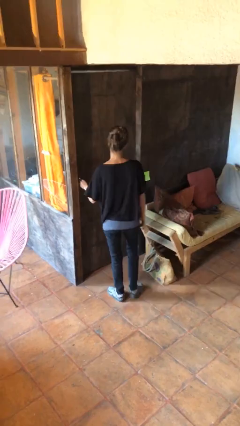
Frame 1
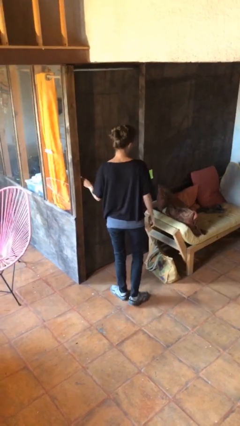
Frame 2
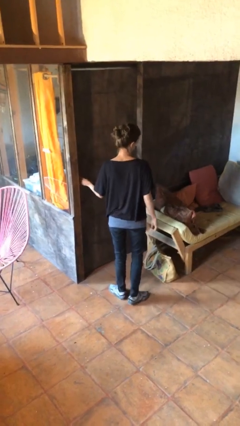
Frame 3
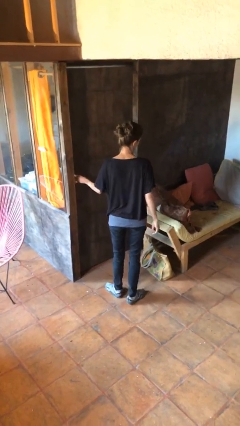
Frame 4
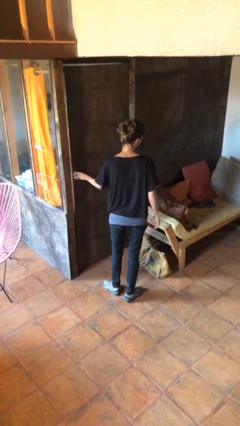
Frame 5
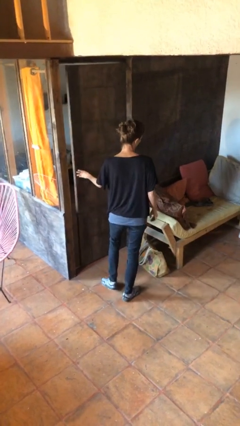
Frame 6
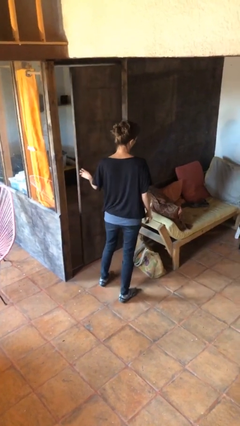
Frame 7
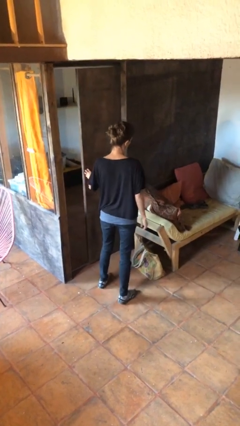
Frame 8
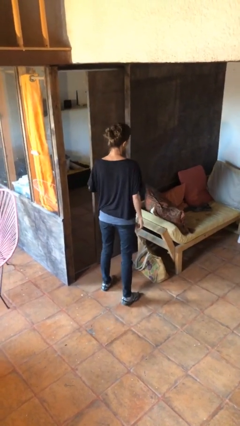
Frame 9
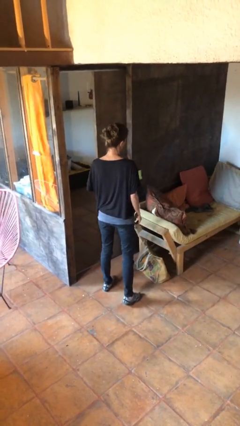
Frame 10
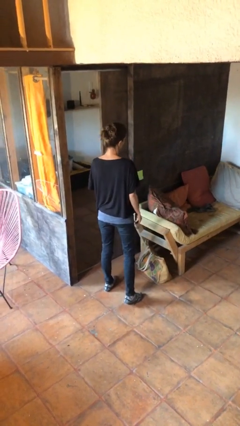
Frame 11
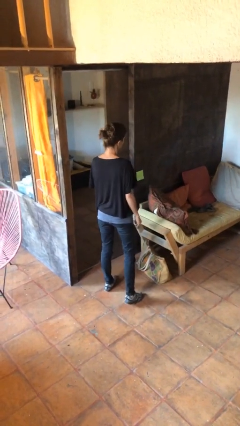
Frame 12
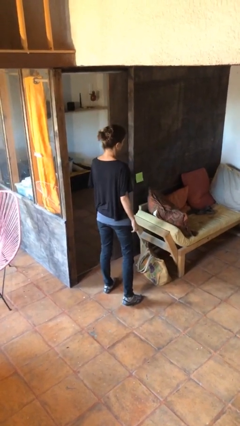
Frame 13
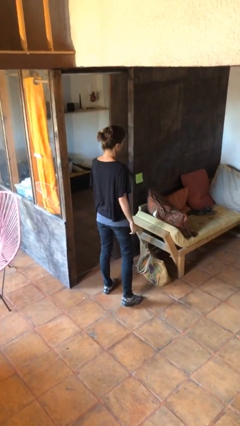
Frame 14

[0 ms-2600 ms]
person opens sliding door

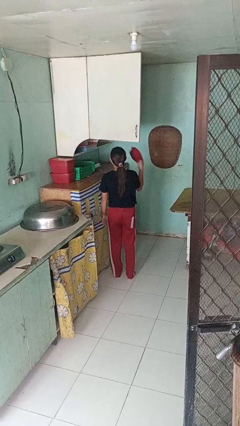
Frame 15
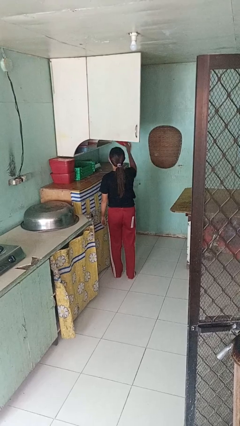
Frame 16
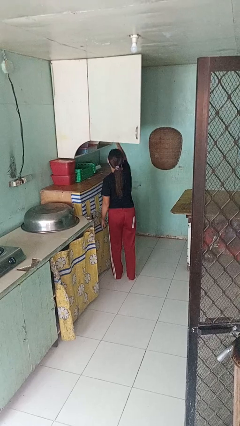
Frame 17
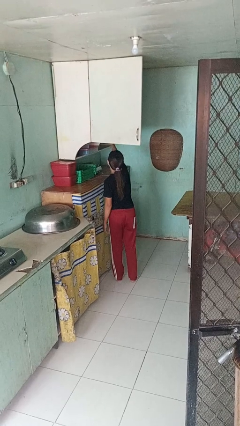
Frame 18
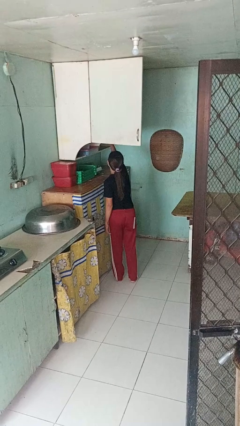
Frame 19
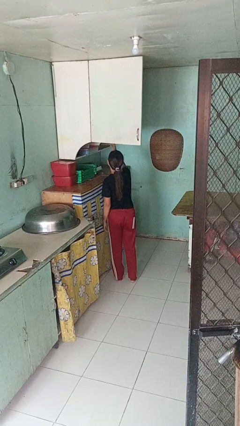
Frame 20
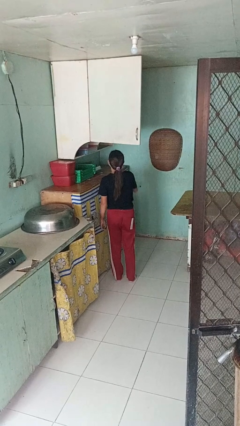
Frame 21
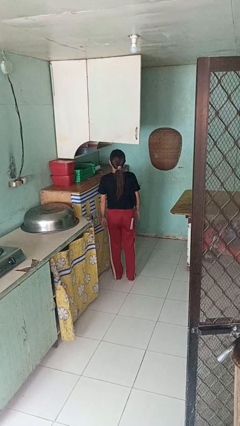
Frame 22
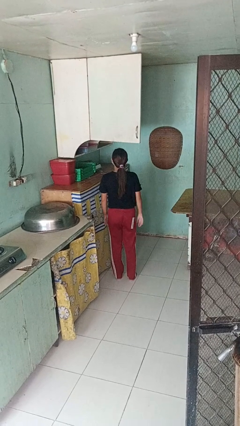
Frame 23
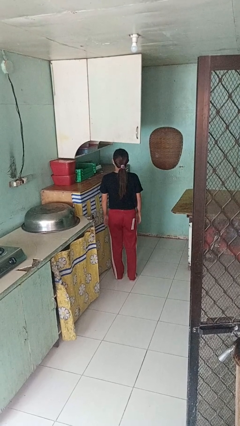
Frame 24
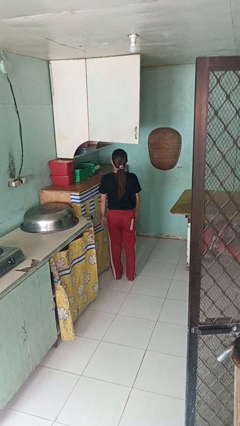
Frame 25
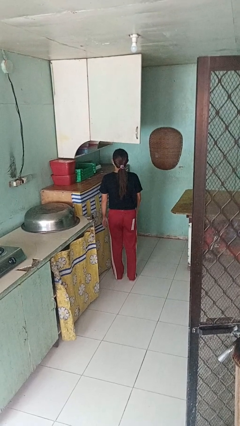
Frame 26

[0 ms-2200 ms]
person puts object in cabinet

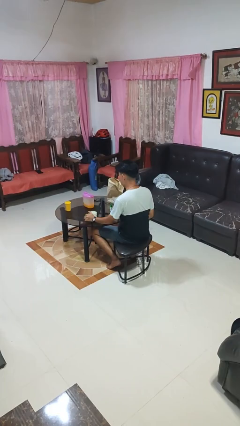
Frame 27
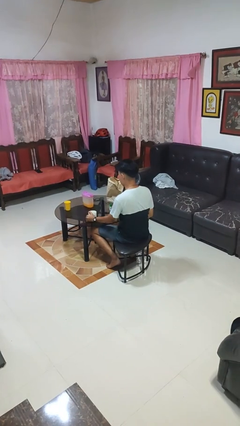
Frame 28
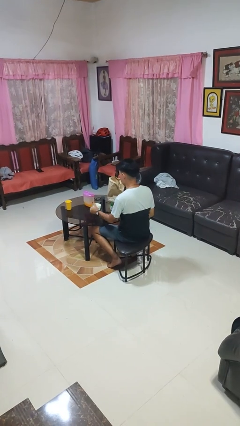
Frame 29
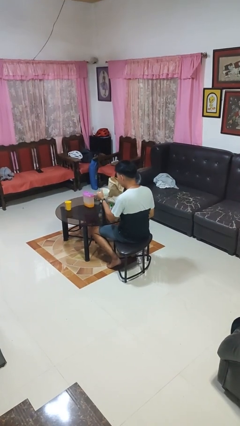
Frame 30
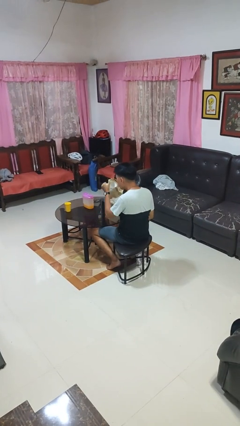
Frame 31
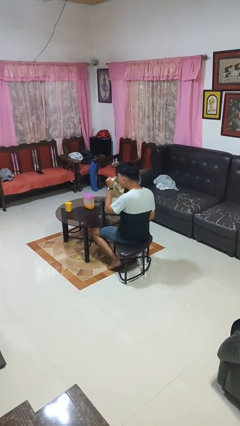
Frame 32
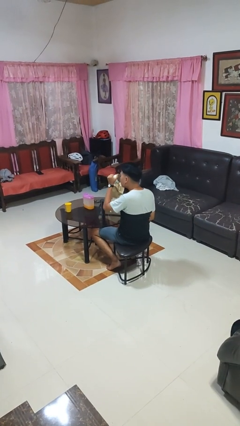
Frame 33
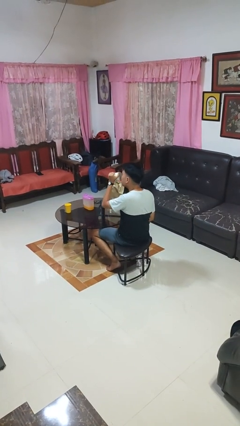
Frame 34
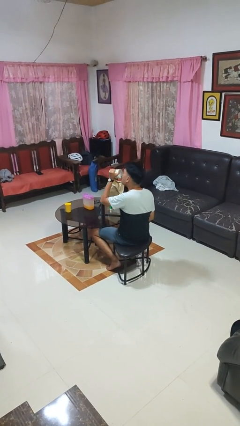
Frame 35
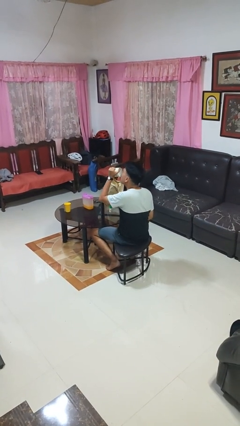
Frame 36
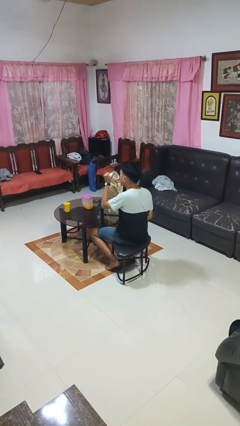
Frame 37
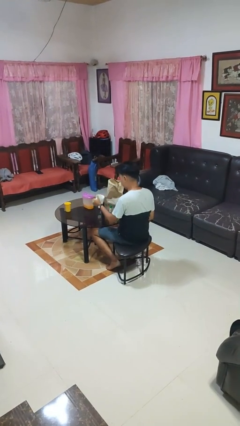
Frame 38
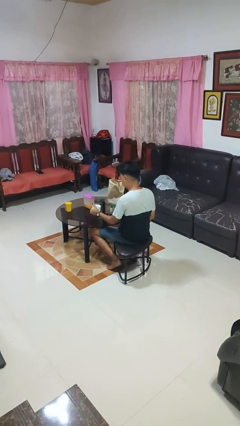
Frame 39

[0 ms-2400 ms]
person drinks from mug

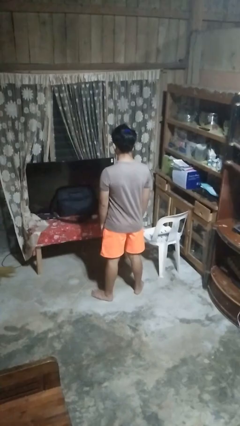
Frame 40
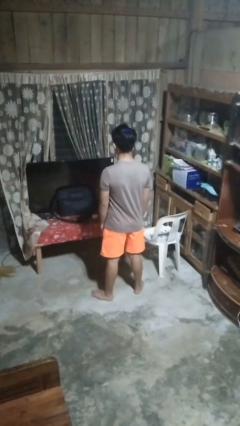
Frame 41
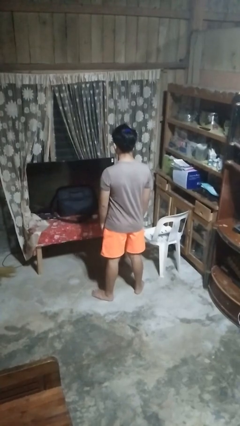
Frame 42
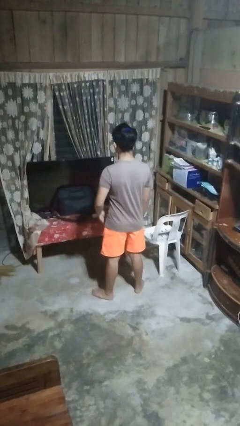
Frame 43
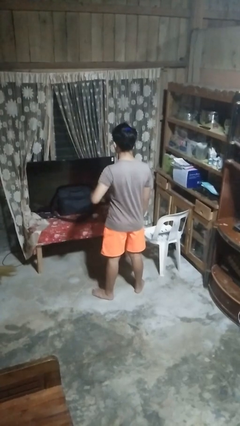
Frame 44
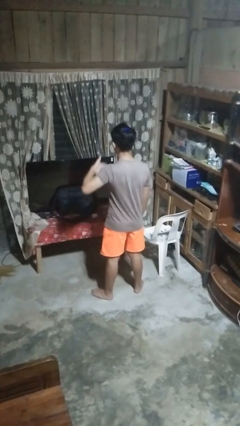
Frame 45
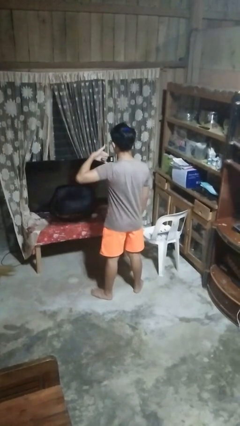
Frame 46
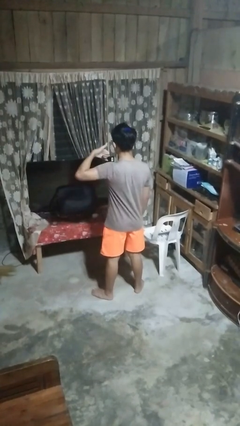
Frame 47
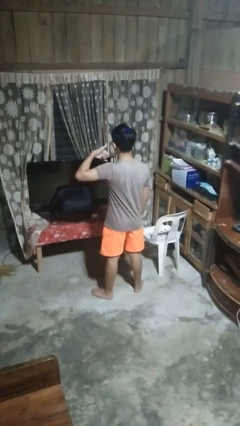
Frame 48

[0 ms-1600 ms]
person gestures call me

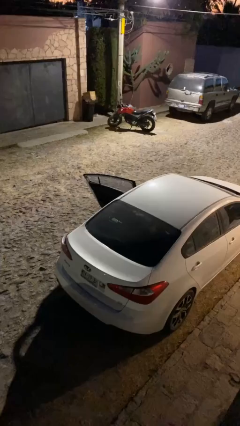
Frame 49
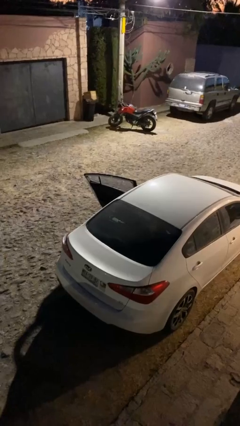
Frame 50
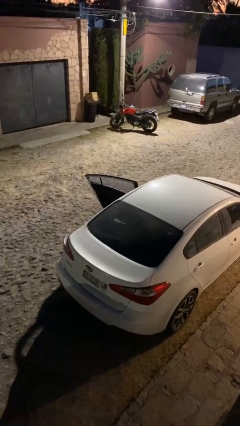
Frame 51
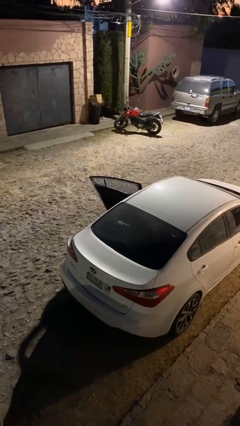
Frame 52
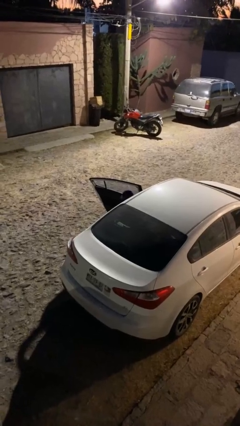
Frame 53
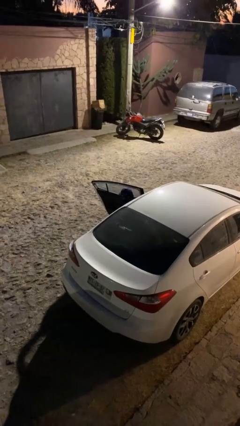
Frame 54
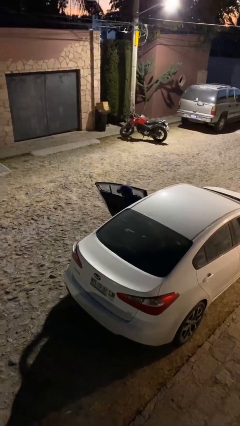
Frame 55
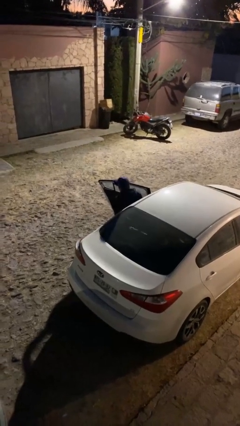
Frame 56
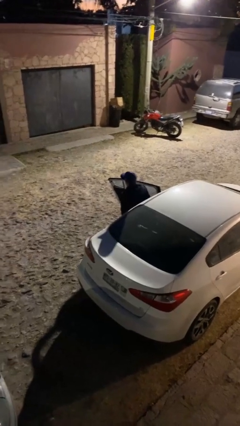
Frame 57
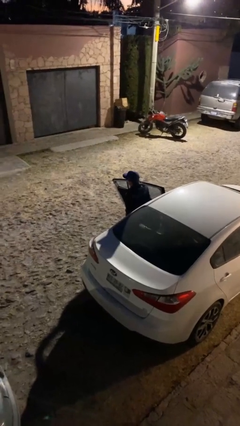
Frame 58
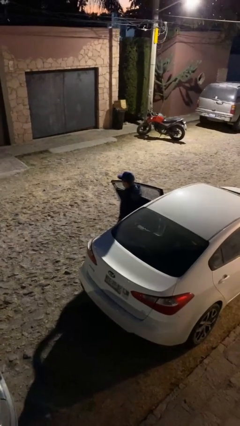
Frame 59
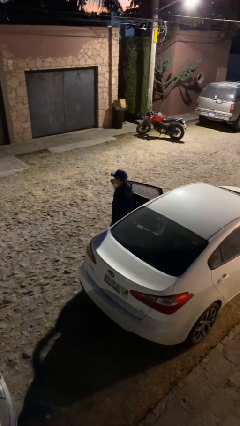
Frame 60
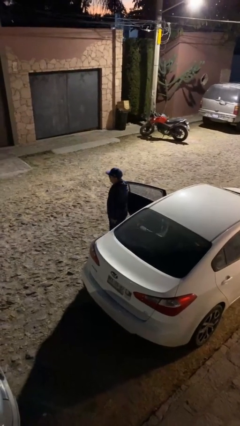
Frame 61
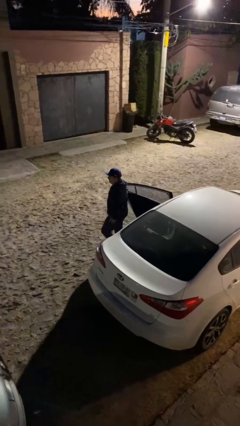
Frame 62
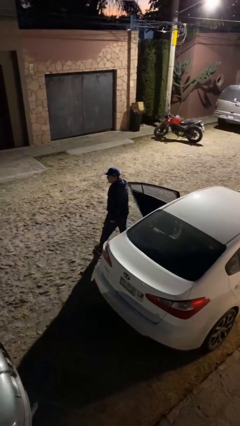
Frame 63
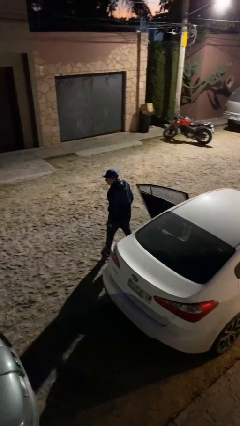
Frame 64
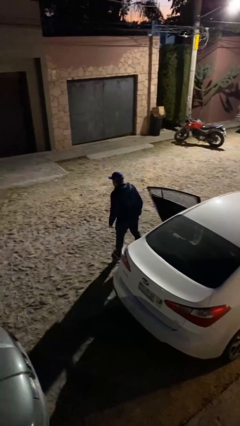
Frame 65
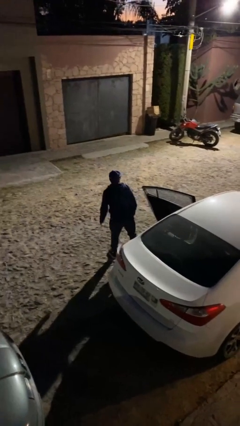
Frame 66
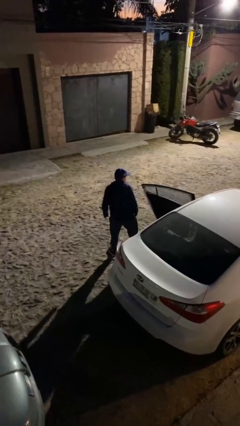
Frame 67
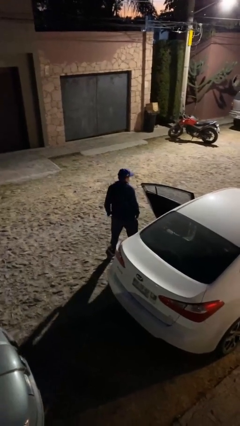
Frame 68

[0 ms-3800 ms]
person exits car

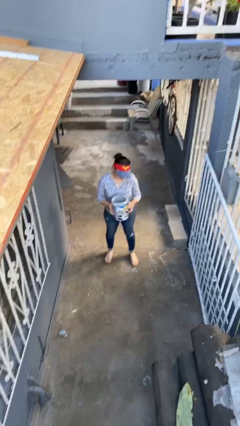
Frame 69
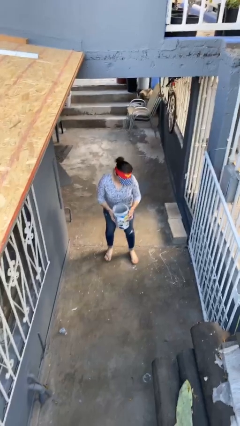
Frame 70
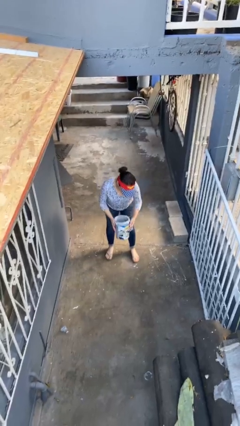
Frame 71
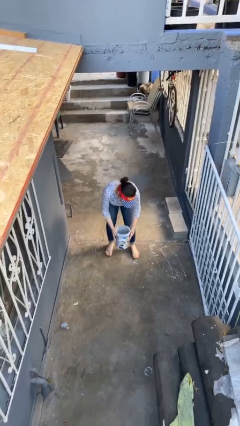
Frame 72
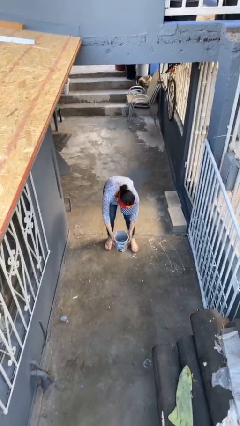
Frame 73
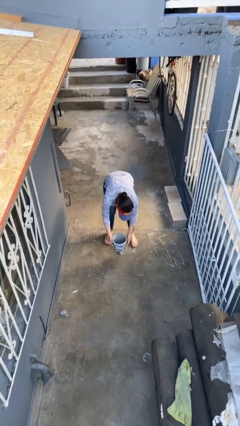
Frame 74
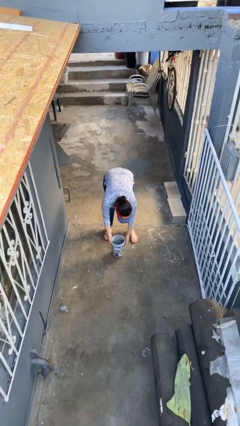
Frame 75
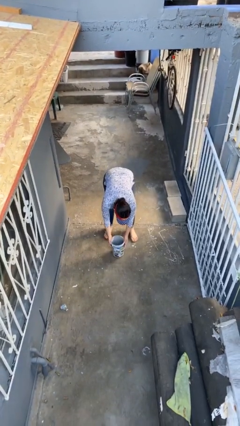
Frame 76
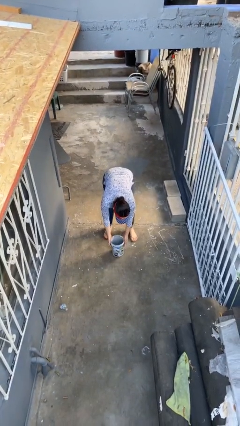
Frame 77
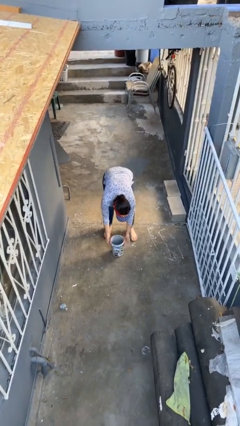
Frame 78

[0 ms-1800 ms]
person puts down object on floor

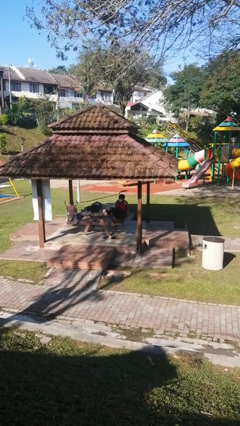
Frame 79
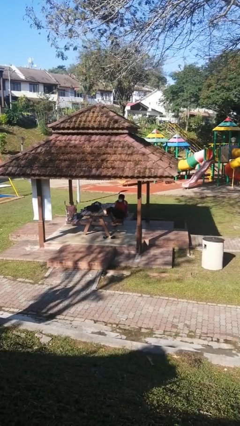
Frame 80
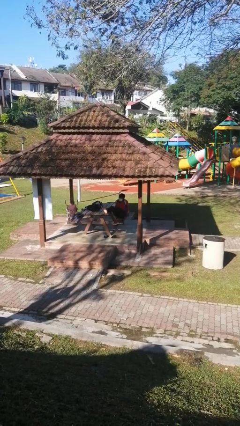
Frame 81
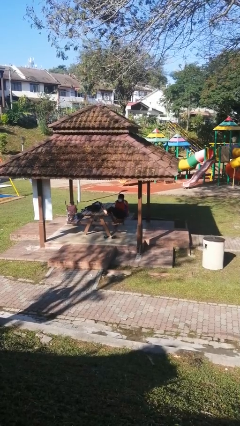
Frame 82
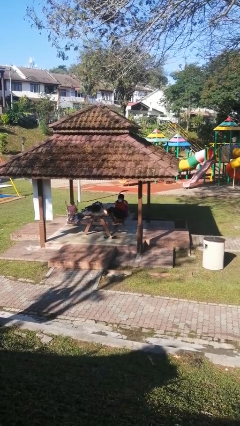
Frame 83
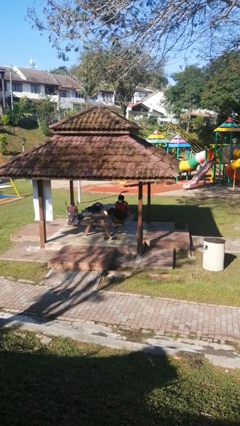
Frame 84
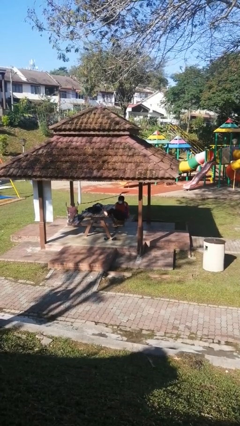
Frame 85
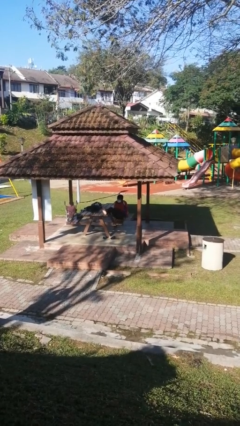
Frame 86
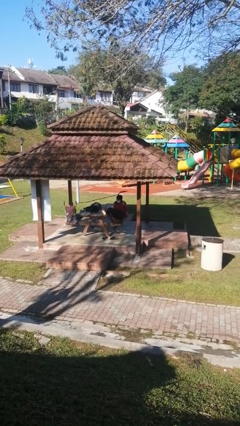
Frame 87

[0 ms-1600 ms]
person puts feet up

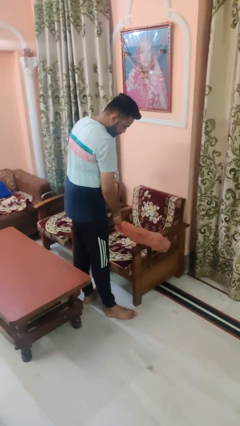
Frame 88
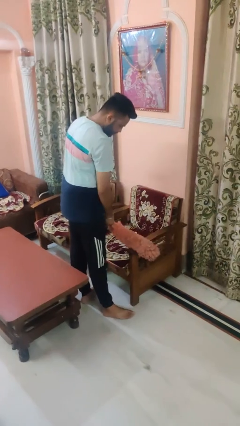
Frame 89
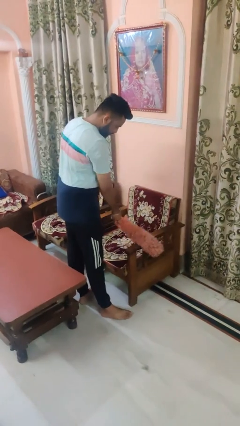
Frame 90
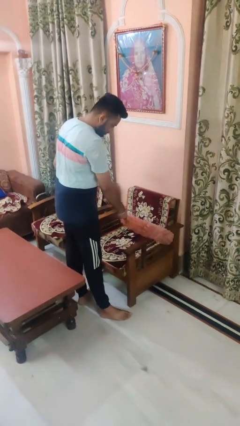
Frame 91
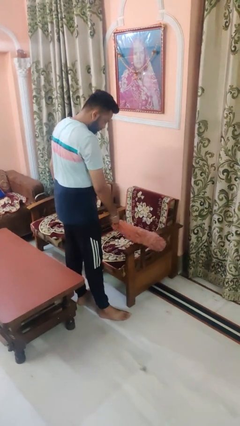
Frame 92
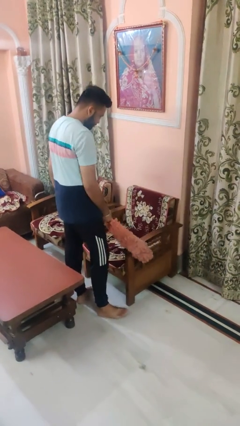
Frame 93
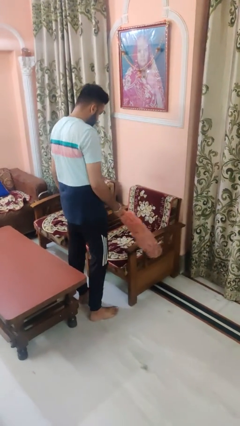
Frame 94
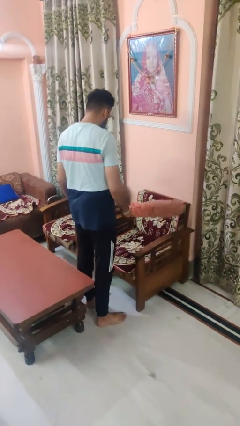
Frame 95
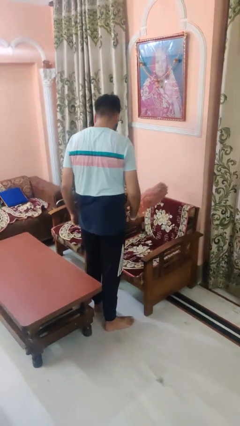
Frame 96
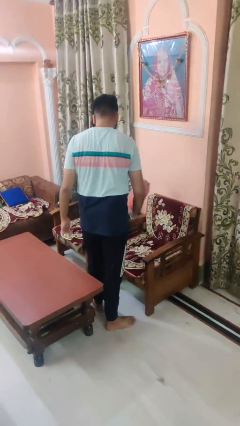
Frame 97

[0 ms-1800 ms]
person dusts furniture
